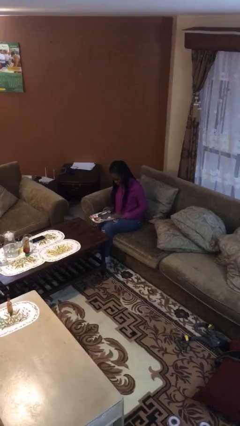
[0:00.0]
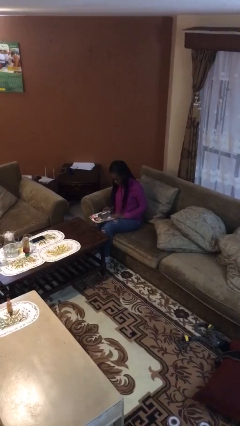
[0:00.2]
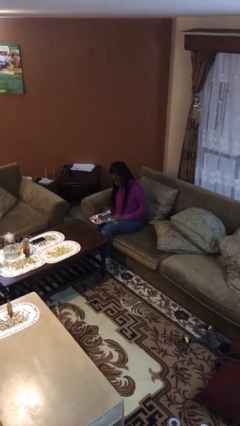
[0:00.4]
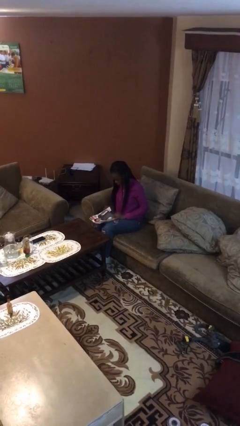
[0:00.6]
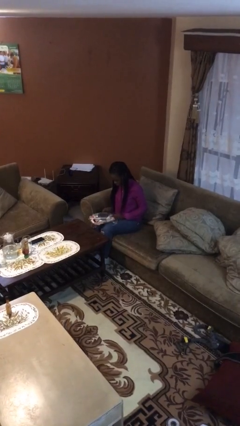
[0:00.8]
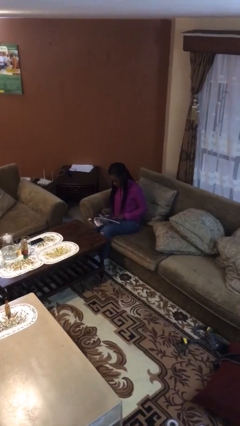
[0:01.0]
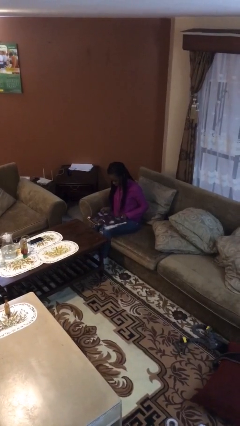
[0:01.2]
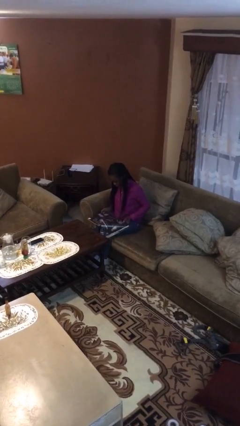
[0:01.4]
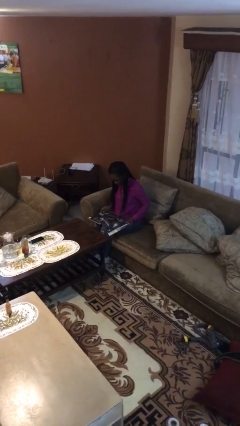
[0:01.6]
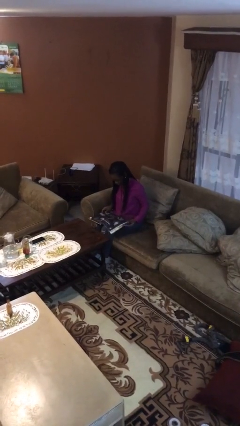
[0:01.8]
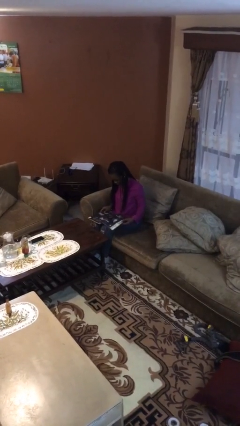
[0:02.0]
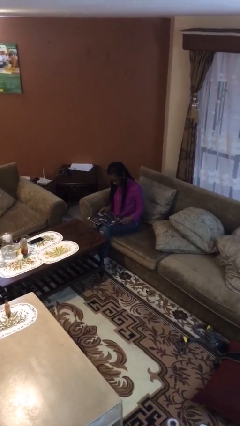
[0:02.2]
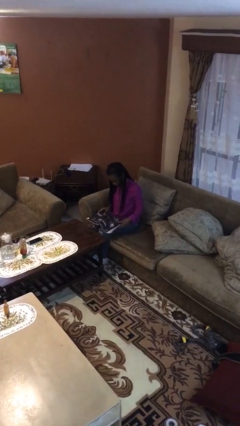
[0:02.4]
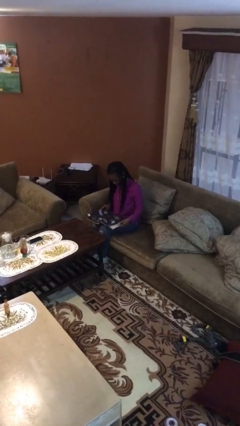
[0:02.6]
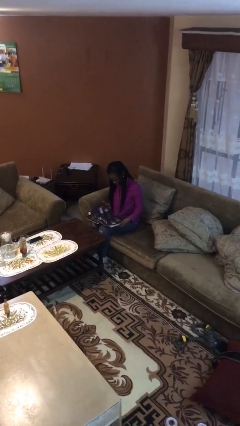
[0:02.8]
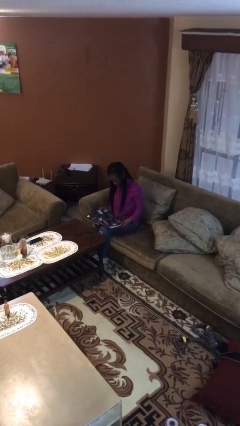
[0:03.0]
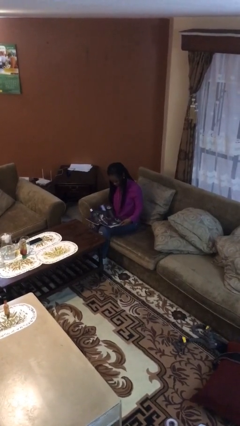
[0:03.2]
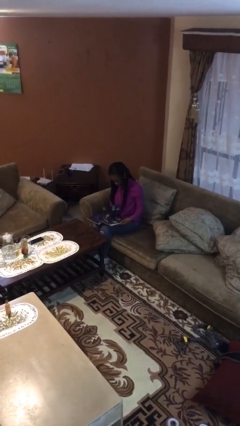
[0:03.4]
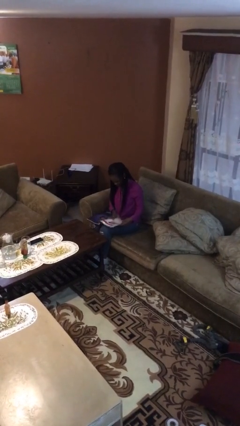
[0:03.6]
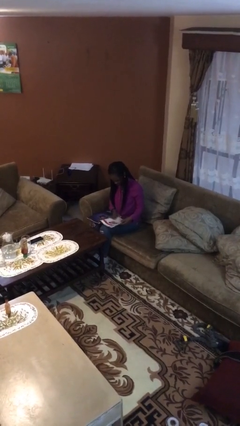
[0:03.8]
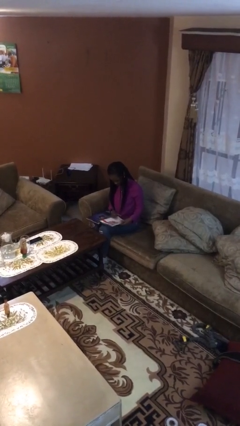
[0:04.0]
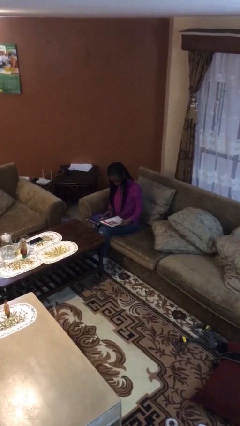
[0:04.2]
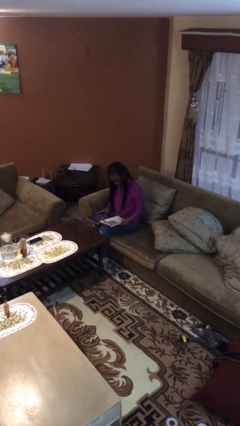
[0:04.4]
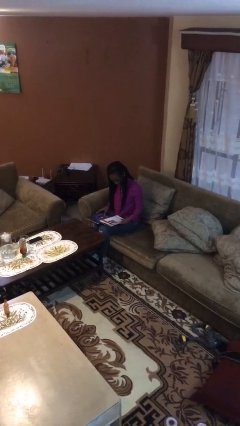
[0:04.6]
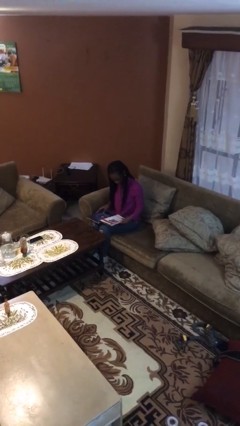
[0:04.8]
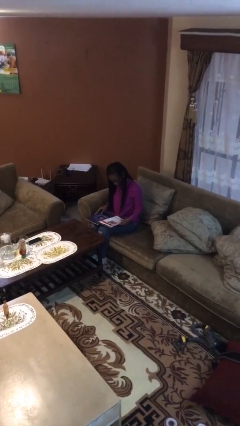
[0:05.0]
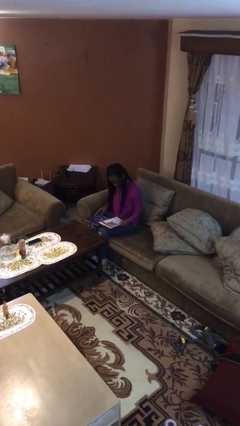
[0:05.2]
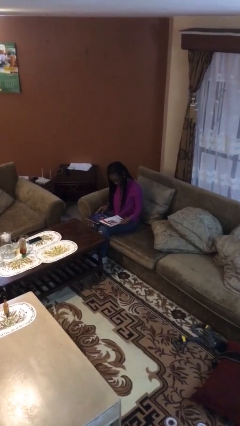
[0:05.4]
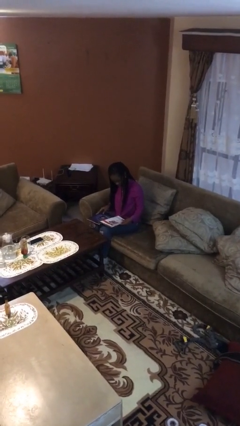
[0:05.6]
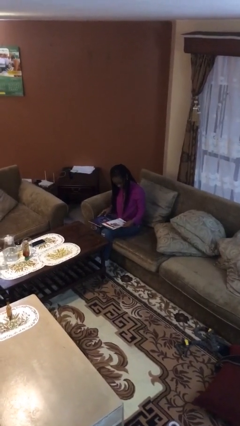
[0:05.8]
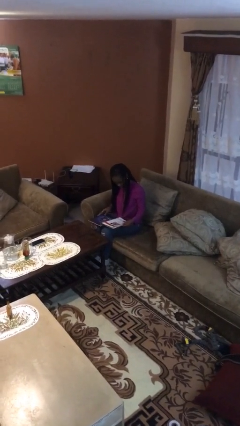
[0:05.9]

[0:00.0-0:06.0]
person reads document

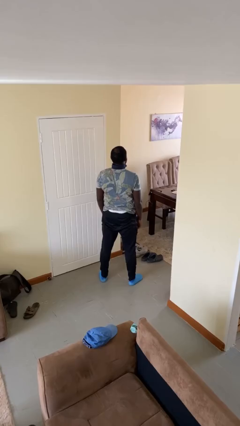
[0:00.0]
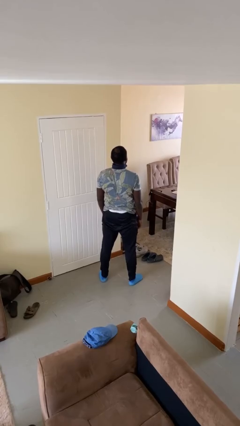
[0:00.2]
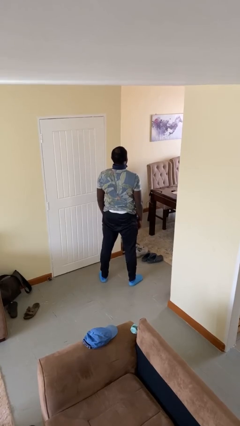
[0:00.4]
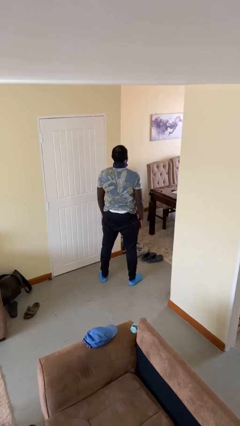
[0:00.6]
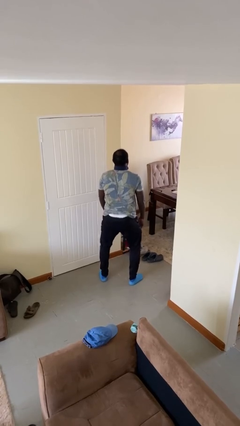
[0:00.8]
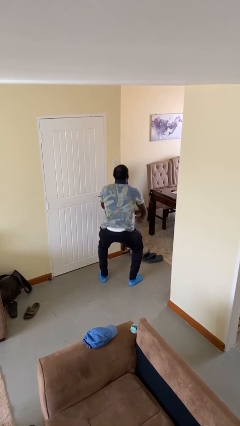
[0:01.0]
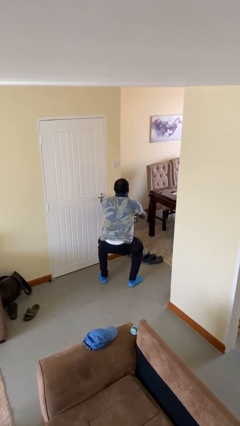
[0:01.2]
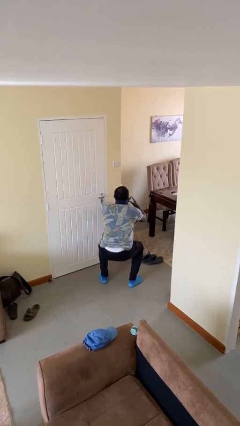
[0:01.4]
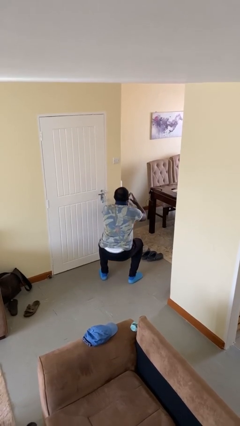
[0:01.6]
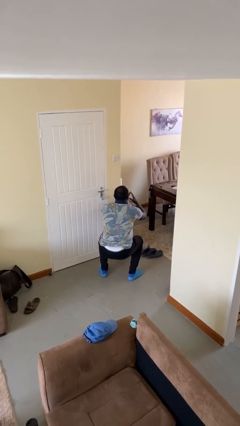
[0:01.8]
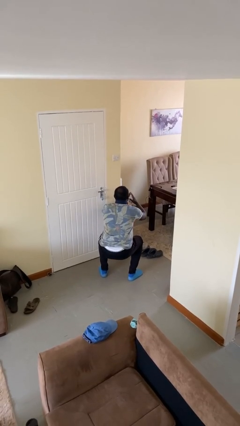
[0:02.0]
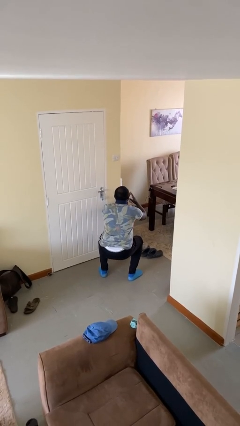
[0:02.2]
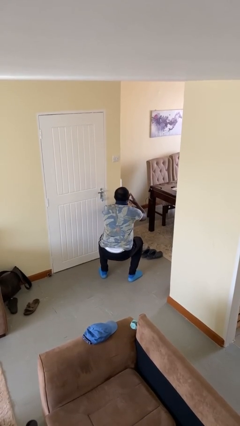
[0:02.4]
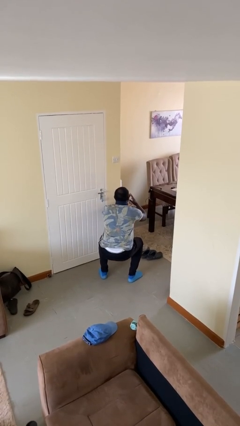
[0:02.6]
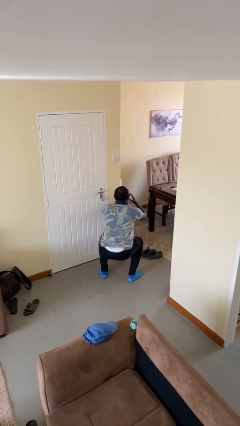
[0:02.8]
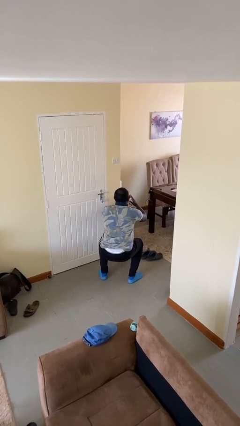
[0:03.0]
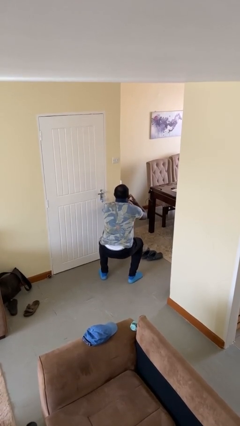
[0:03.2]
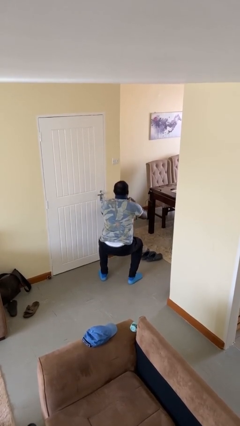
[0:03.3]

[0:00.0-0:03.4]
person squats

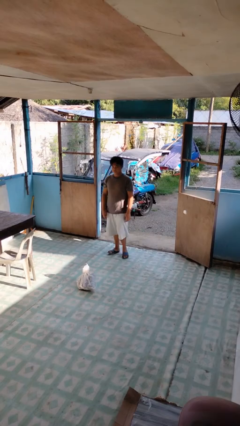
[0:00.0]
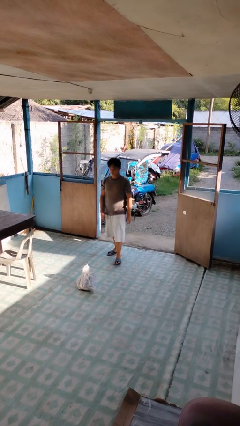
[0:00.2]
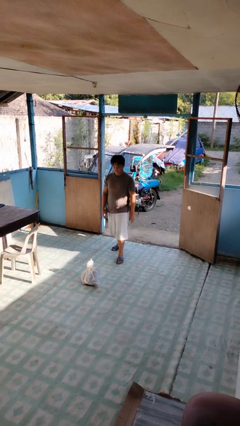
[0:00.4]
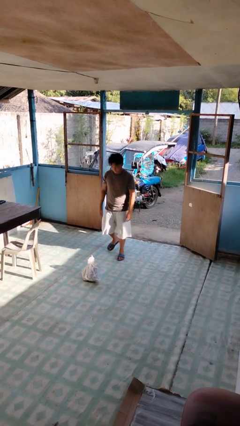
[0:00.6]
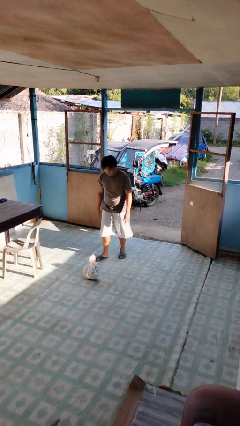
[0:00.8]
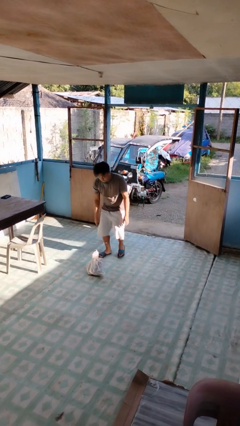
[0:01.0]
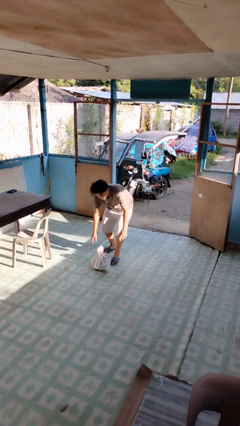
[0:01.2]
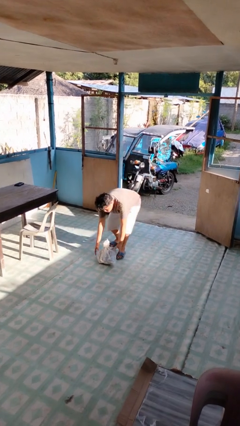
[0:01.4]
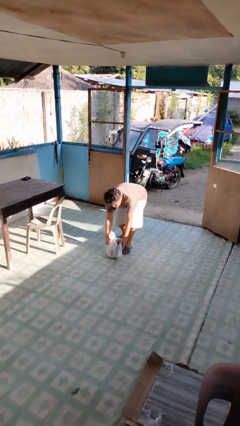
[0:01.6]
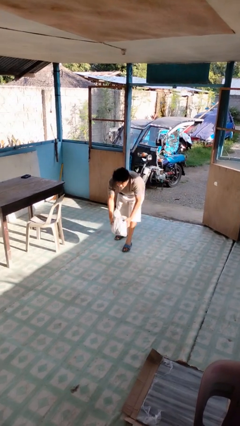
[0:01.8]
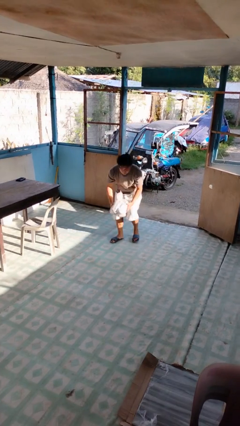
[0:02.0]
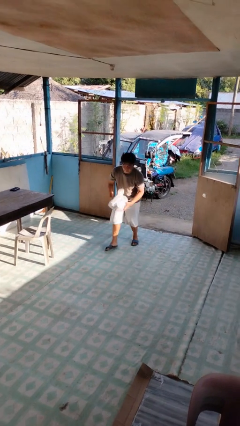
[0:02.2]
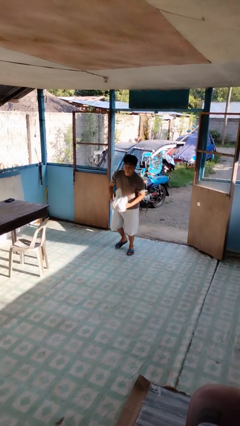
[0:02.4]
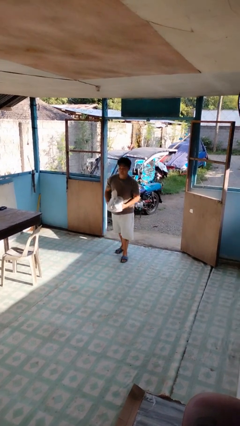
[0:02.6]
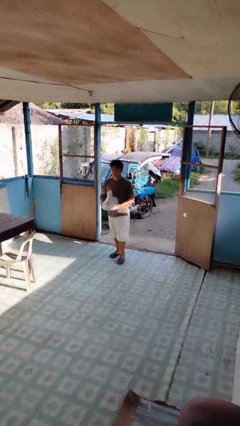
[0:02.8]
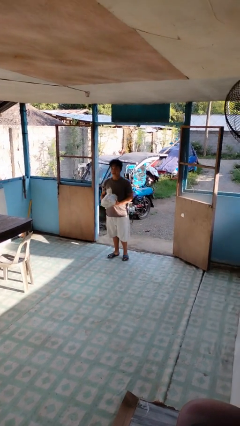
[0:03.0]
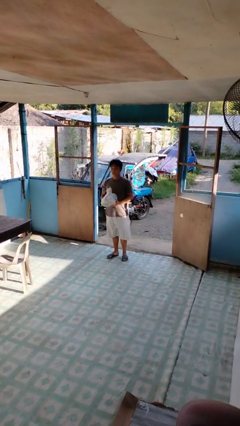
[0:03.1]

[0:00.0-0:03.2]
person picks up object from floor

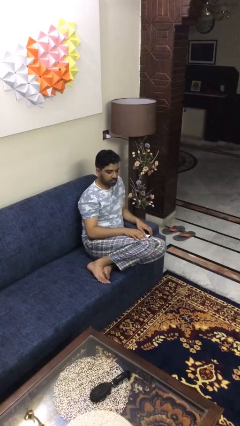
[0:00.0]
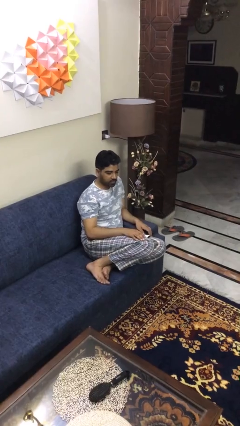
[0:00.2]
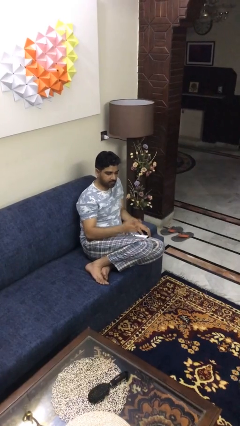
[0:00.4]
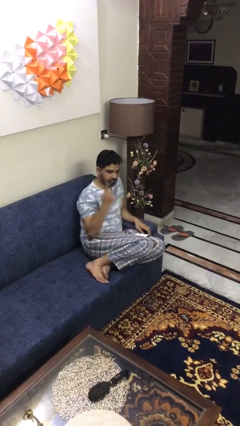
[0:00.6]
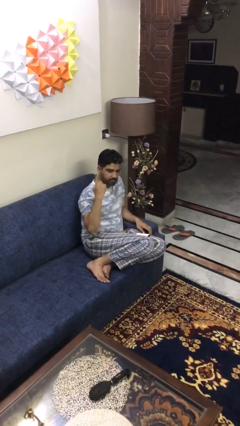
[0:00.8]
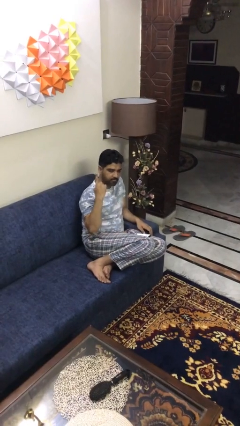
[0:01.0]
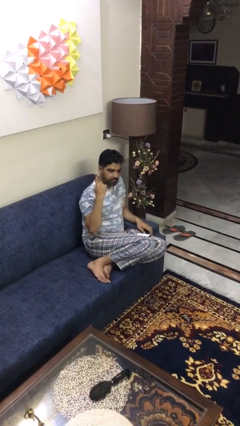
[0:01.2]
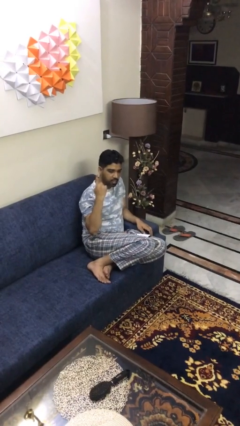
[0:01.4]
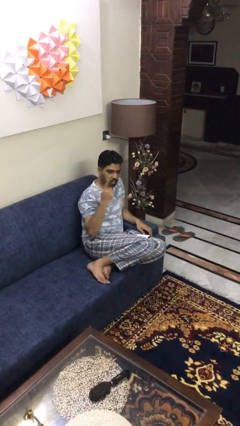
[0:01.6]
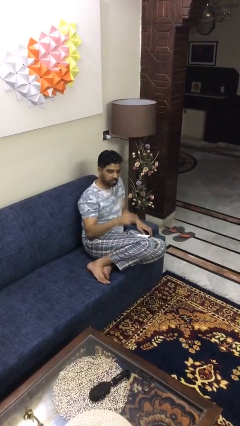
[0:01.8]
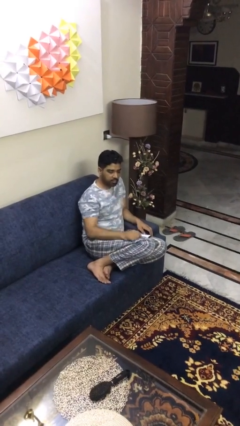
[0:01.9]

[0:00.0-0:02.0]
person gestures number one

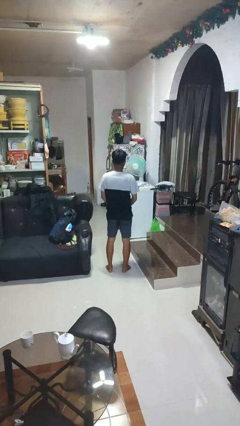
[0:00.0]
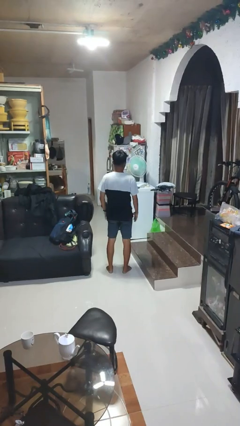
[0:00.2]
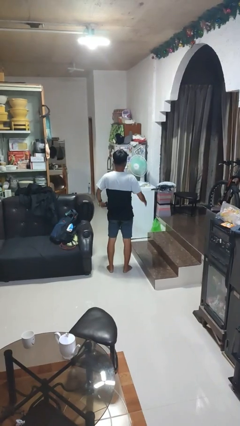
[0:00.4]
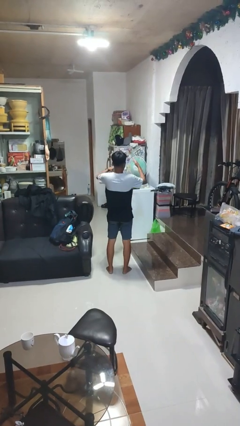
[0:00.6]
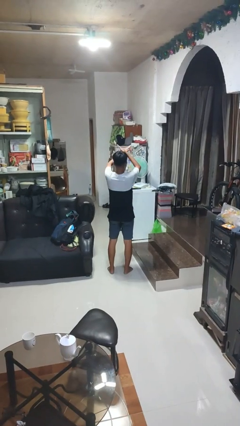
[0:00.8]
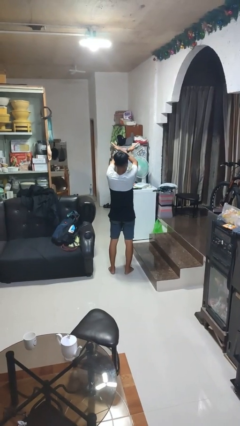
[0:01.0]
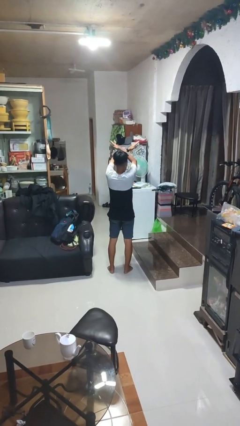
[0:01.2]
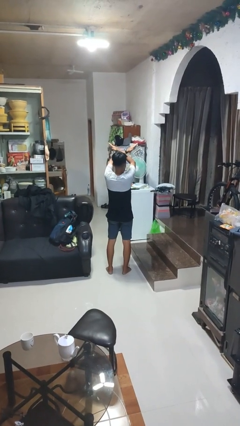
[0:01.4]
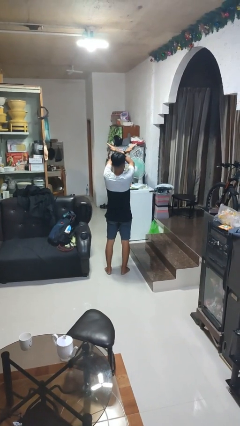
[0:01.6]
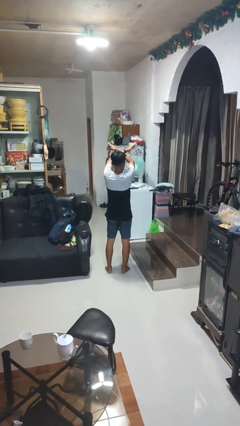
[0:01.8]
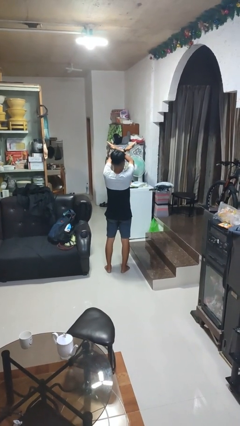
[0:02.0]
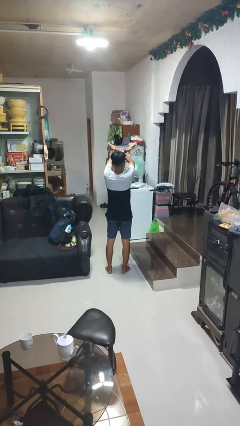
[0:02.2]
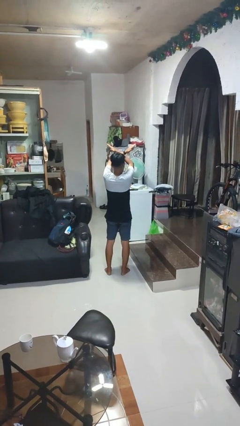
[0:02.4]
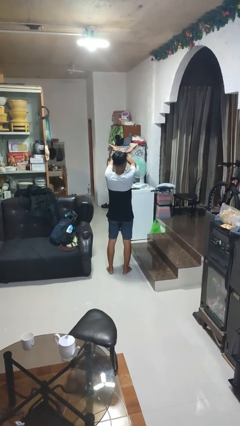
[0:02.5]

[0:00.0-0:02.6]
person gestures arms x

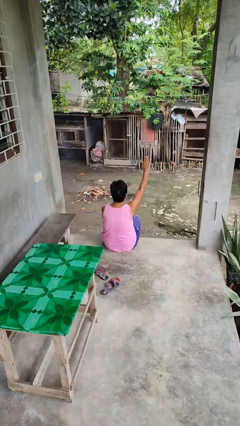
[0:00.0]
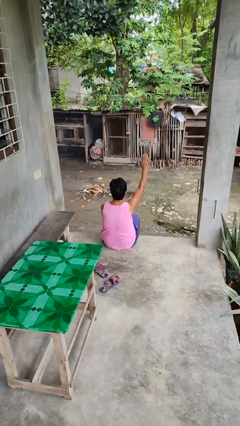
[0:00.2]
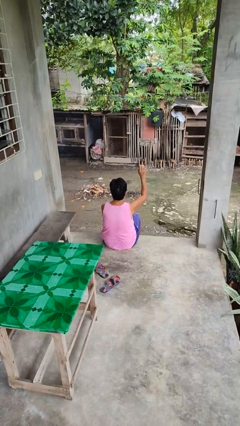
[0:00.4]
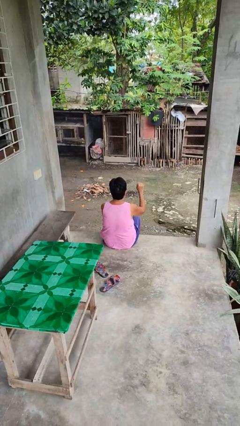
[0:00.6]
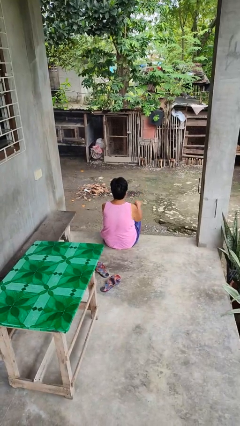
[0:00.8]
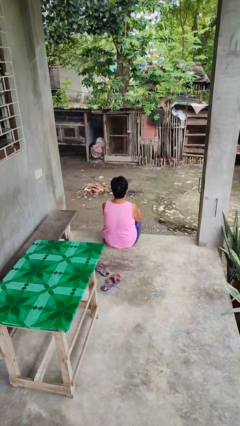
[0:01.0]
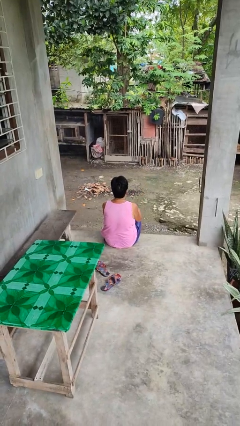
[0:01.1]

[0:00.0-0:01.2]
person gestures lower hand
